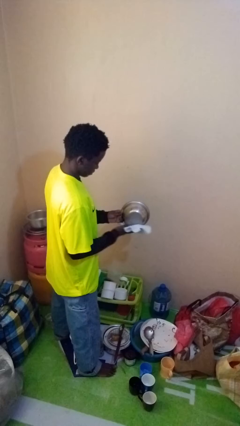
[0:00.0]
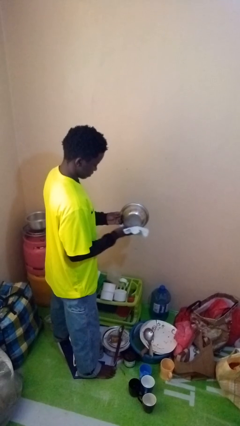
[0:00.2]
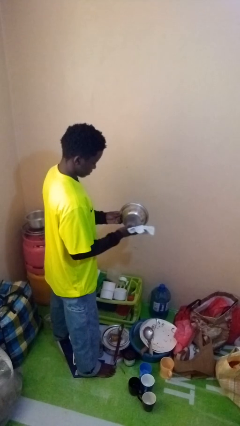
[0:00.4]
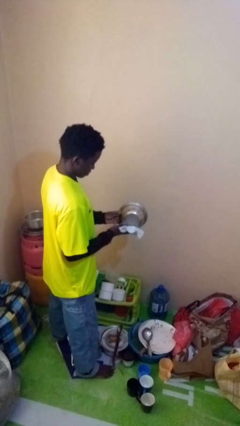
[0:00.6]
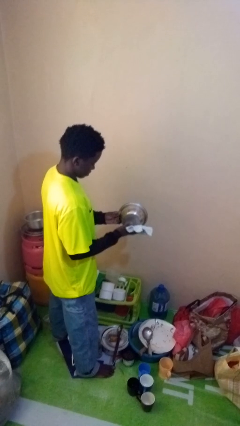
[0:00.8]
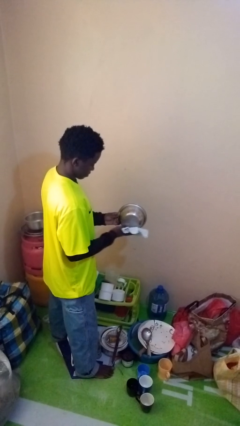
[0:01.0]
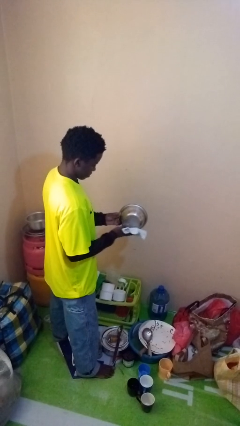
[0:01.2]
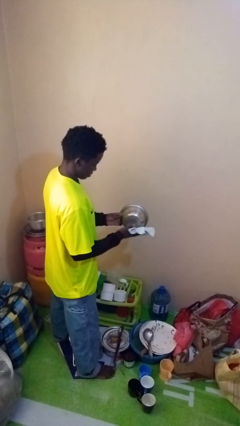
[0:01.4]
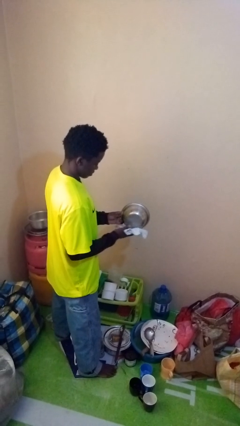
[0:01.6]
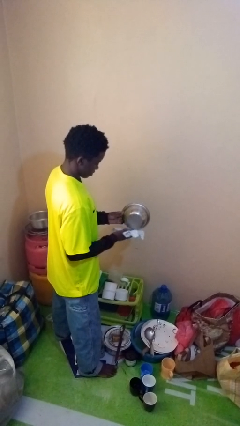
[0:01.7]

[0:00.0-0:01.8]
person dries dish

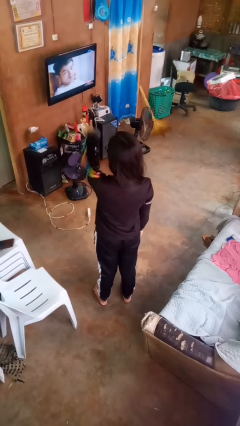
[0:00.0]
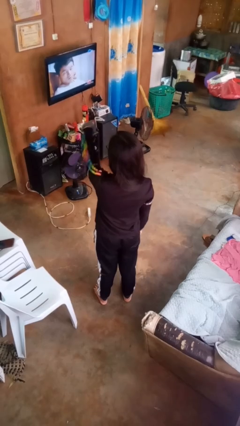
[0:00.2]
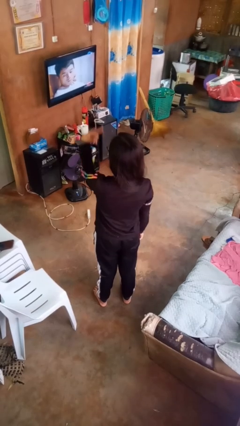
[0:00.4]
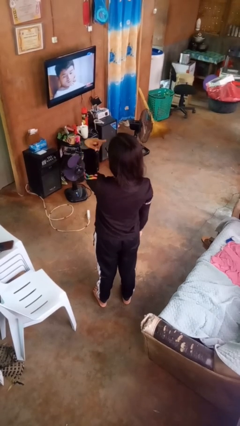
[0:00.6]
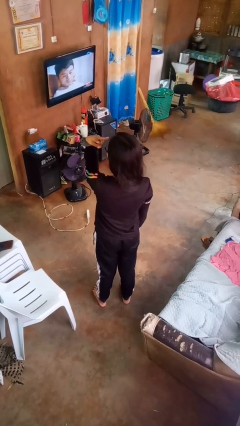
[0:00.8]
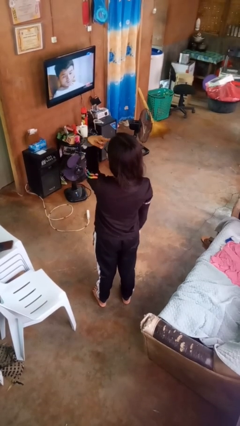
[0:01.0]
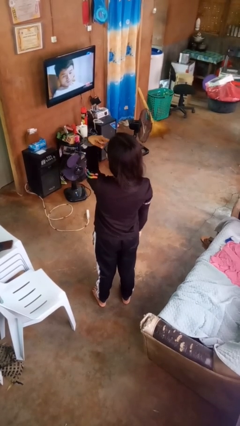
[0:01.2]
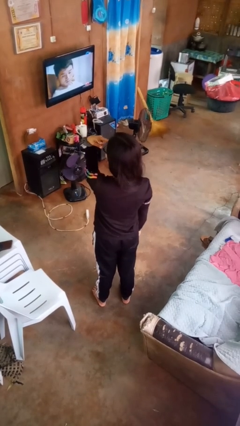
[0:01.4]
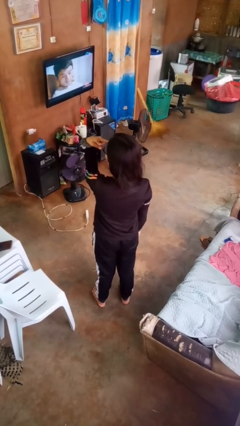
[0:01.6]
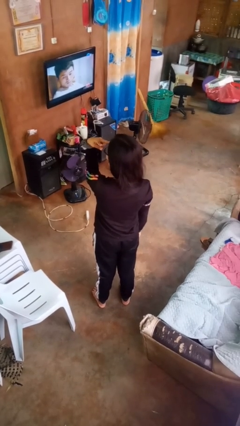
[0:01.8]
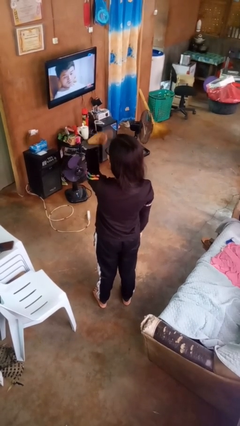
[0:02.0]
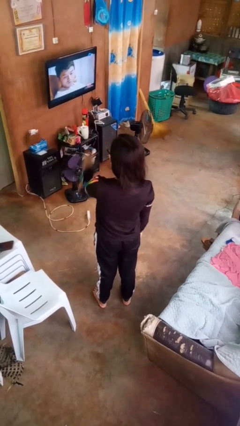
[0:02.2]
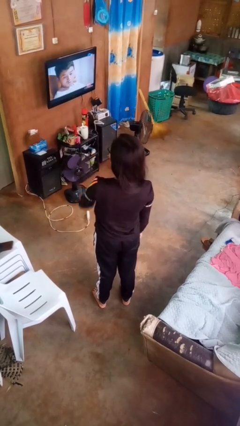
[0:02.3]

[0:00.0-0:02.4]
person gestures watch closely

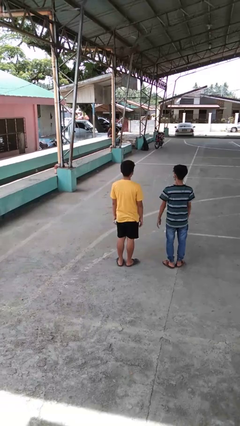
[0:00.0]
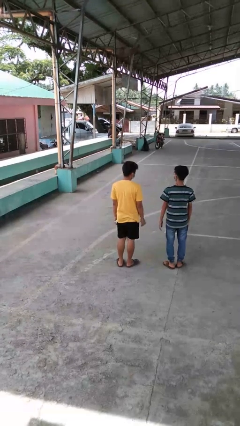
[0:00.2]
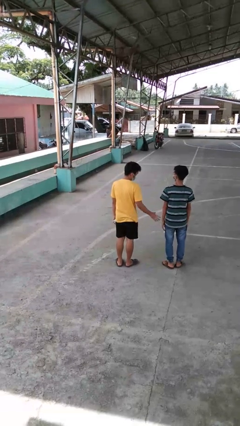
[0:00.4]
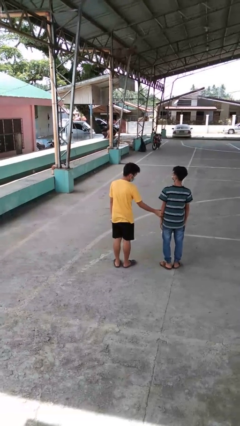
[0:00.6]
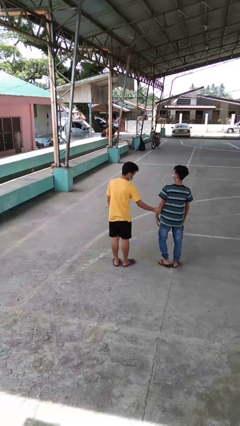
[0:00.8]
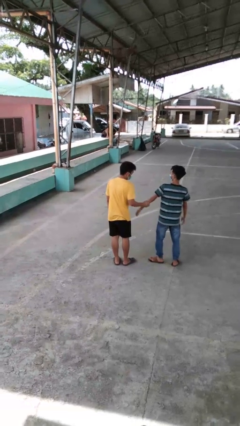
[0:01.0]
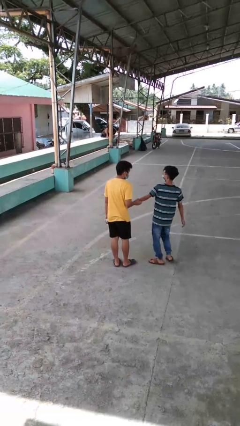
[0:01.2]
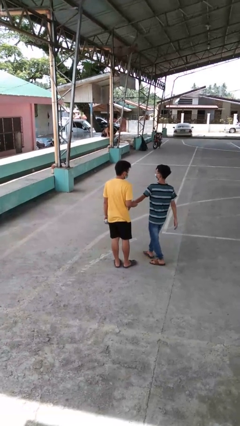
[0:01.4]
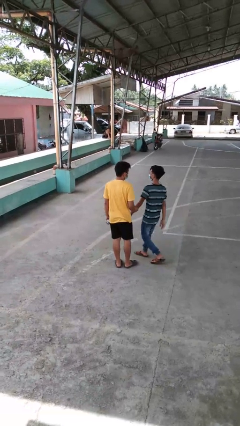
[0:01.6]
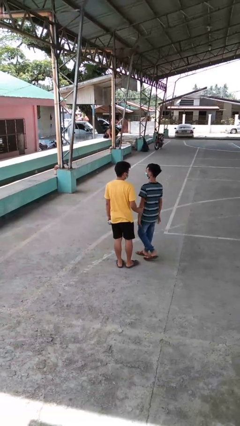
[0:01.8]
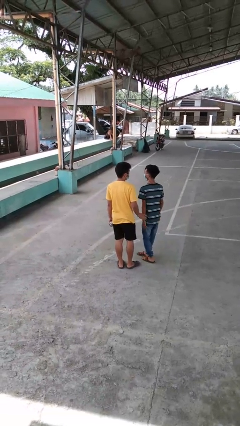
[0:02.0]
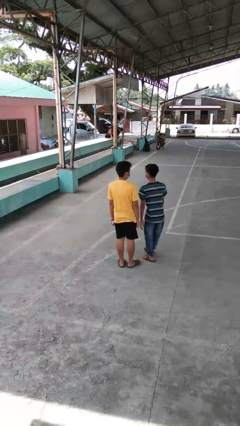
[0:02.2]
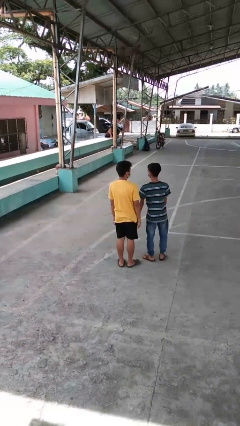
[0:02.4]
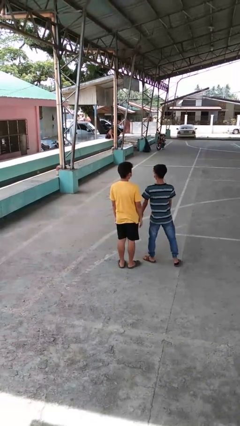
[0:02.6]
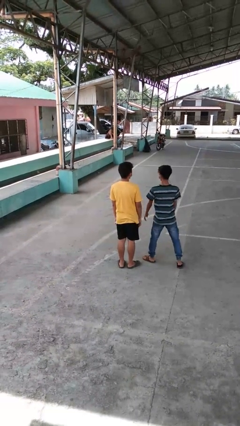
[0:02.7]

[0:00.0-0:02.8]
person grabs person by forearm

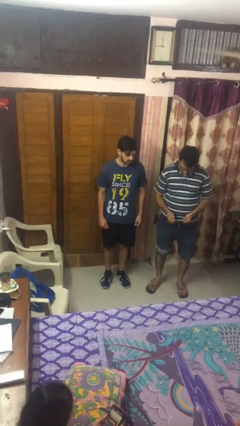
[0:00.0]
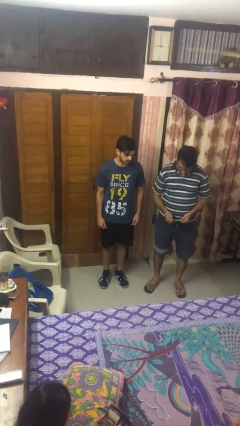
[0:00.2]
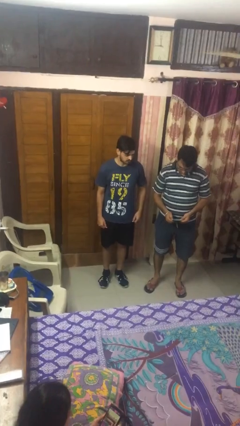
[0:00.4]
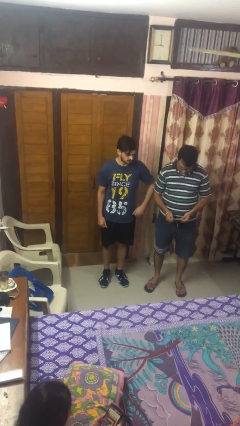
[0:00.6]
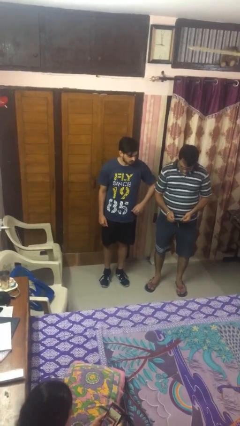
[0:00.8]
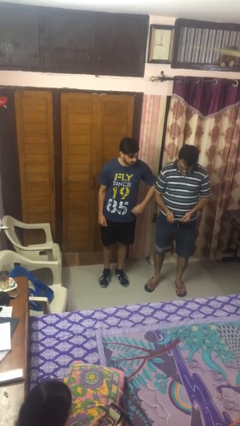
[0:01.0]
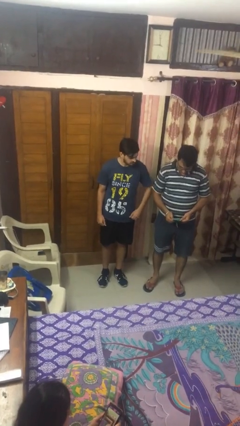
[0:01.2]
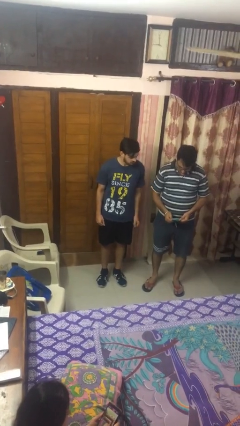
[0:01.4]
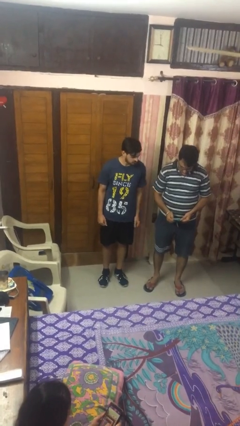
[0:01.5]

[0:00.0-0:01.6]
person nudges person with elbow

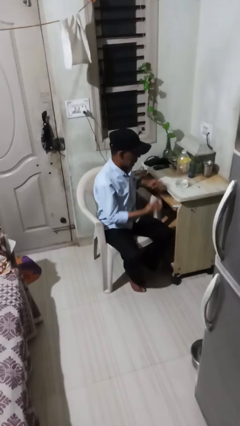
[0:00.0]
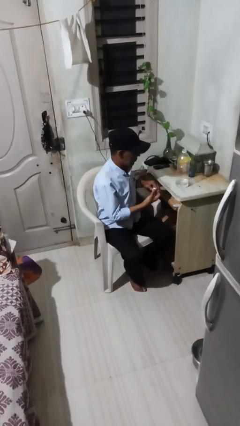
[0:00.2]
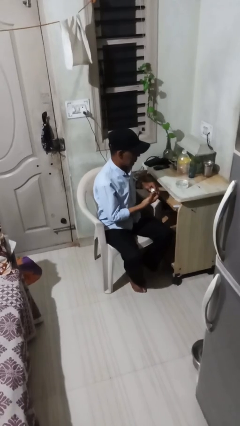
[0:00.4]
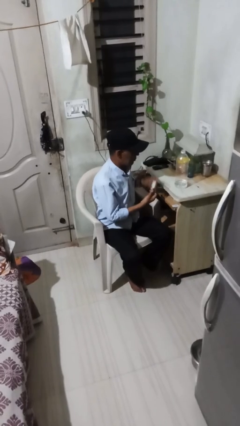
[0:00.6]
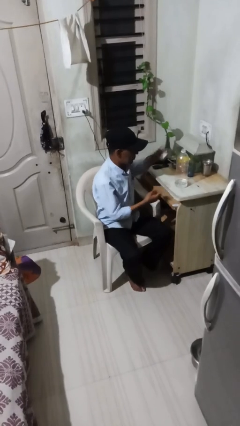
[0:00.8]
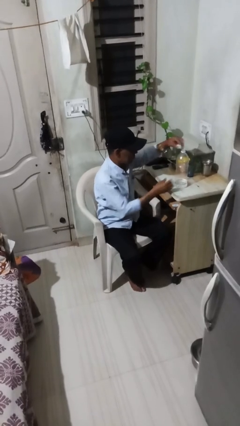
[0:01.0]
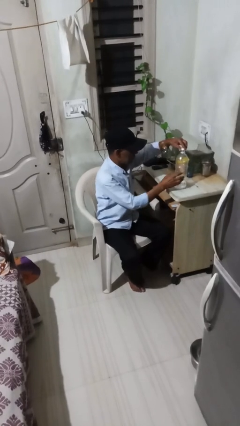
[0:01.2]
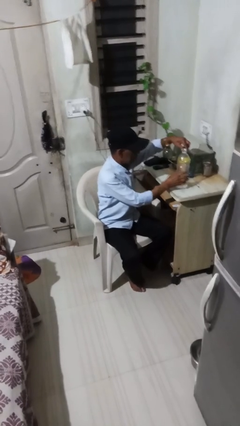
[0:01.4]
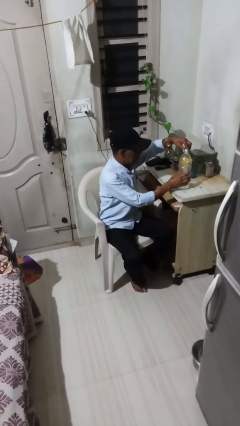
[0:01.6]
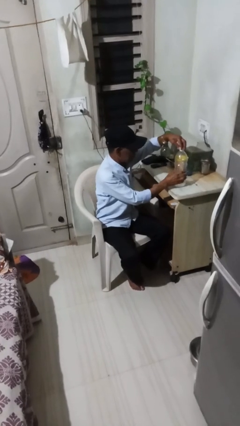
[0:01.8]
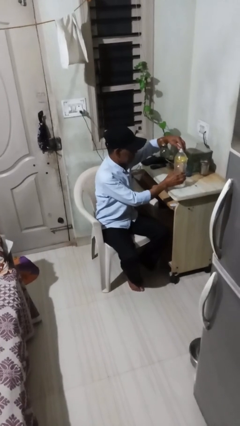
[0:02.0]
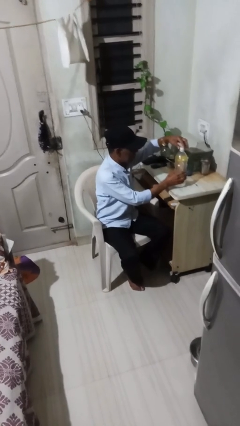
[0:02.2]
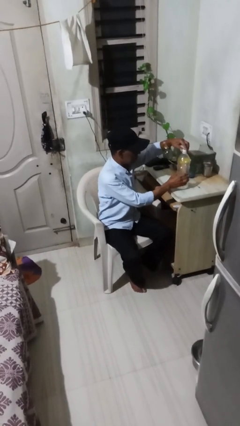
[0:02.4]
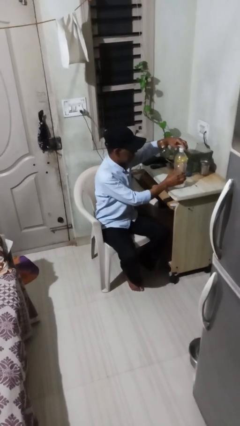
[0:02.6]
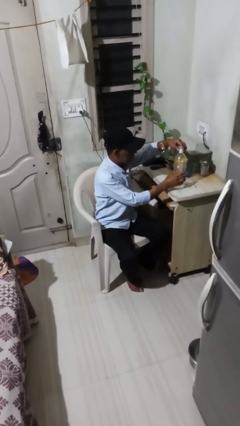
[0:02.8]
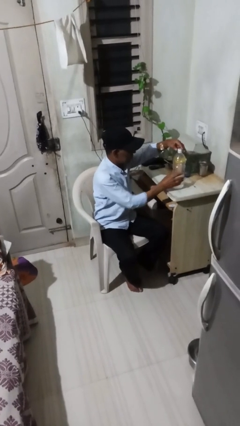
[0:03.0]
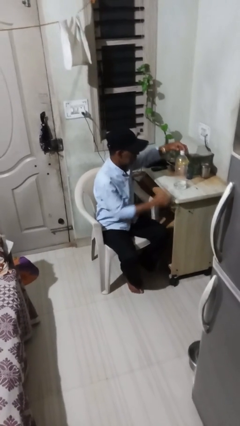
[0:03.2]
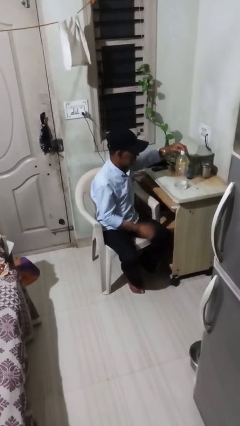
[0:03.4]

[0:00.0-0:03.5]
person screws lid to bottle

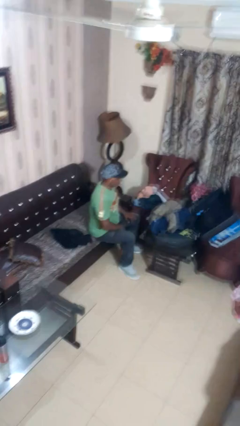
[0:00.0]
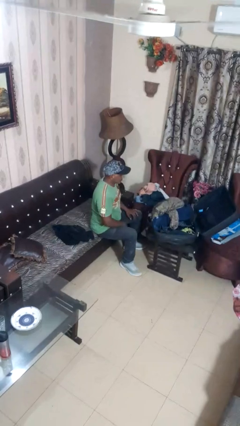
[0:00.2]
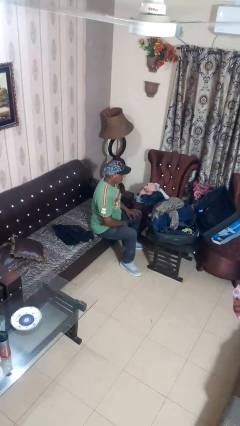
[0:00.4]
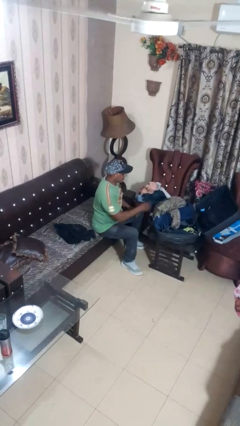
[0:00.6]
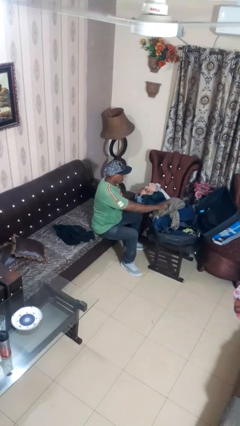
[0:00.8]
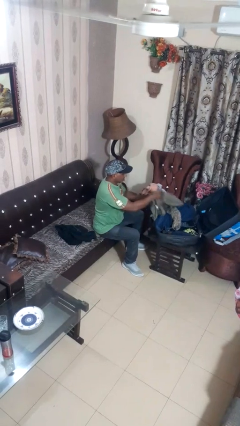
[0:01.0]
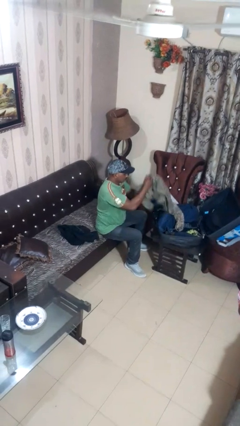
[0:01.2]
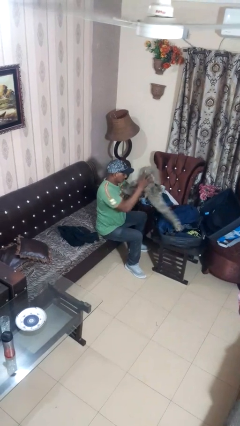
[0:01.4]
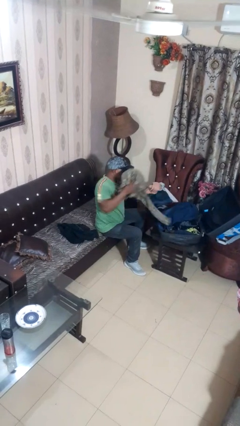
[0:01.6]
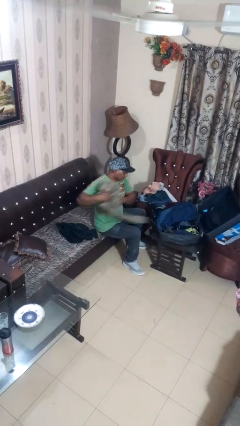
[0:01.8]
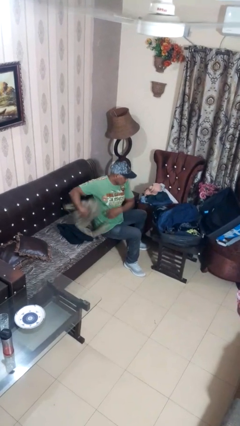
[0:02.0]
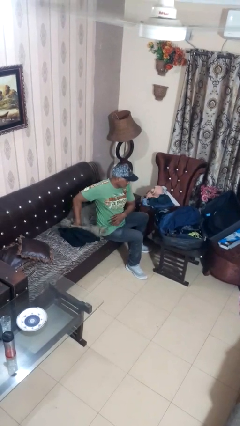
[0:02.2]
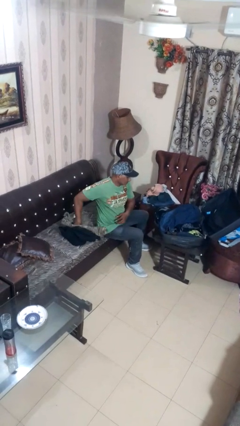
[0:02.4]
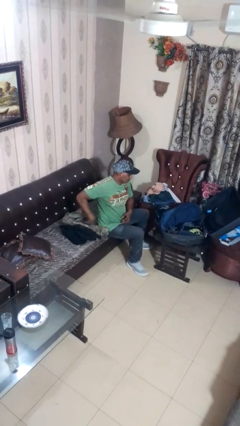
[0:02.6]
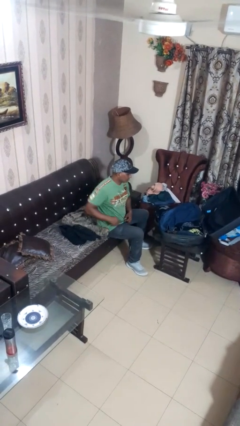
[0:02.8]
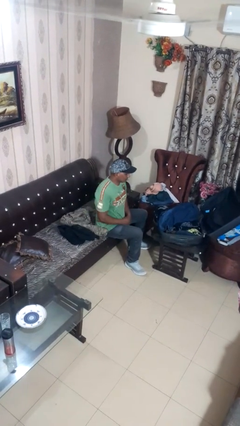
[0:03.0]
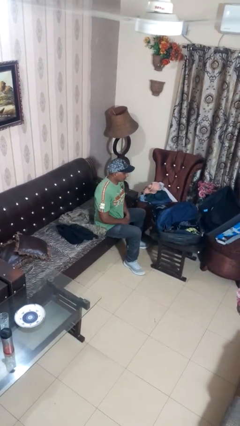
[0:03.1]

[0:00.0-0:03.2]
person unloads clothes from suitcase

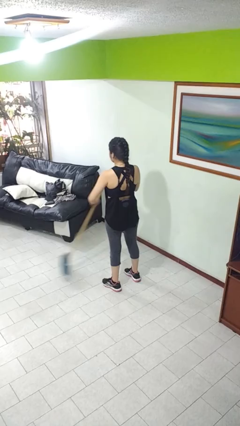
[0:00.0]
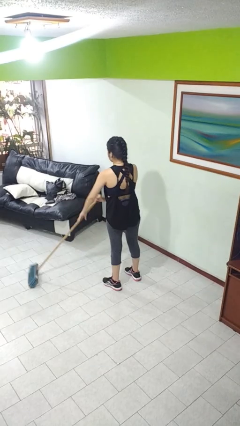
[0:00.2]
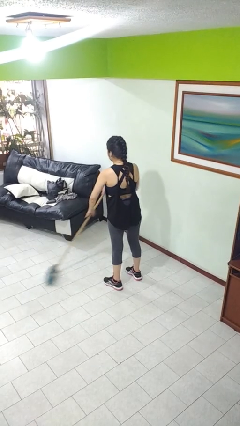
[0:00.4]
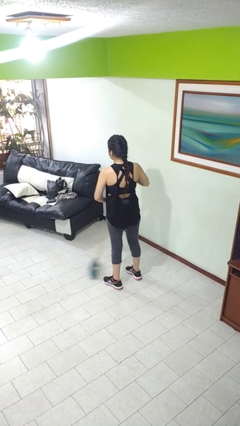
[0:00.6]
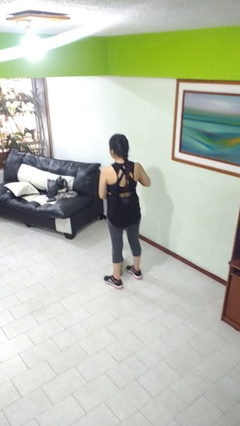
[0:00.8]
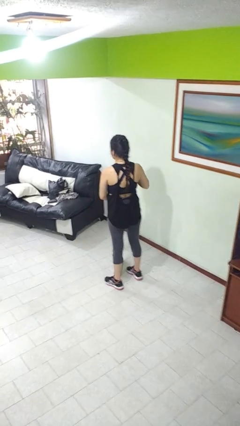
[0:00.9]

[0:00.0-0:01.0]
person sweeps floor

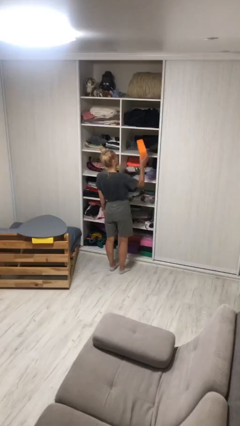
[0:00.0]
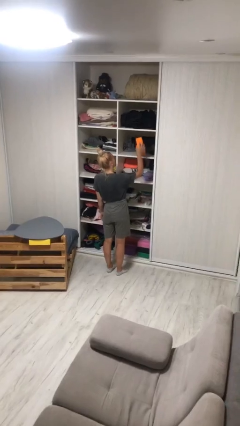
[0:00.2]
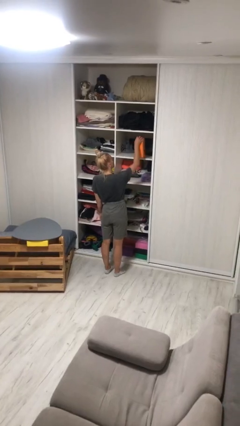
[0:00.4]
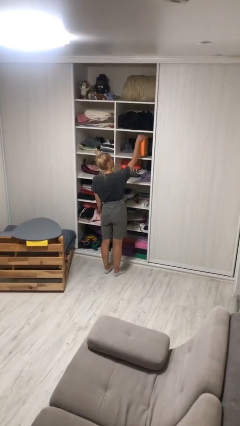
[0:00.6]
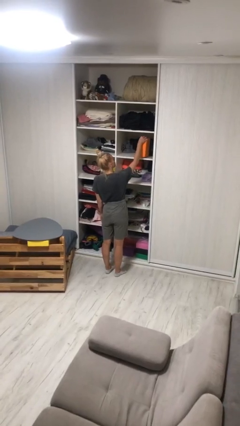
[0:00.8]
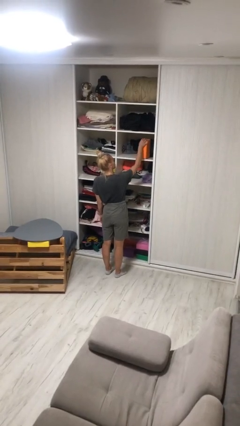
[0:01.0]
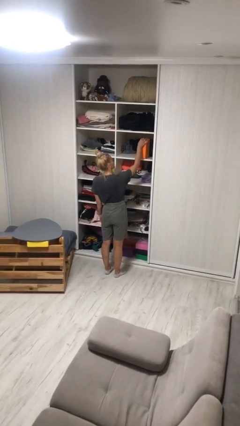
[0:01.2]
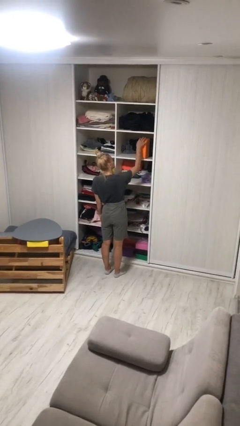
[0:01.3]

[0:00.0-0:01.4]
person puts down object on shelf
